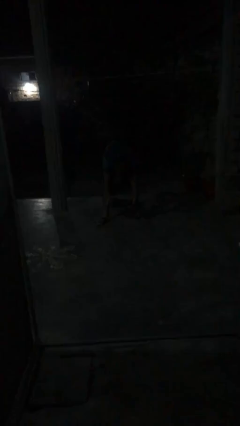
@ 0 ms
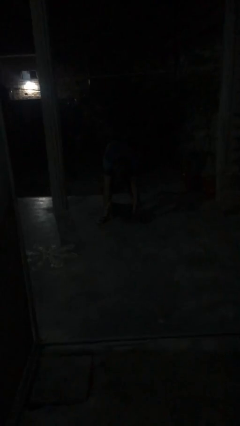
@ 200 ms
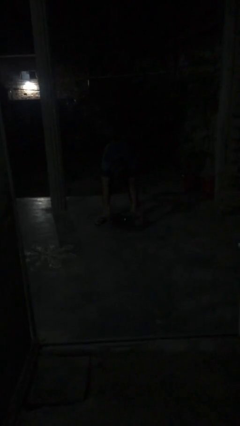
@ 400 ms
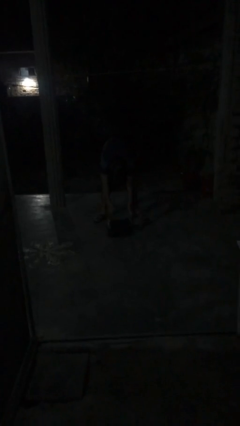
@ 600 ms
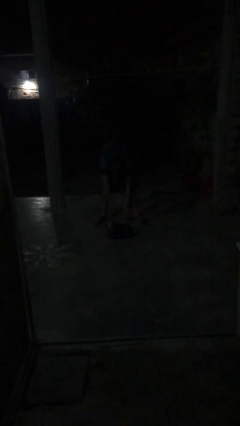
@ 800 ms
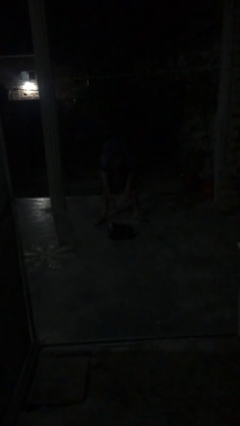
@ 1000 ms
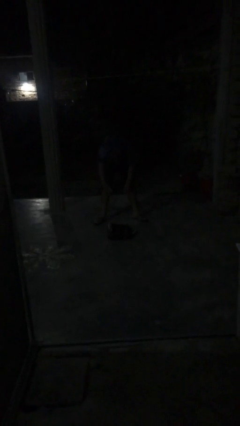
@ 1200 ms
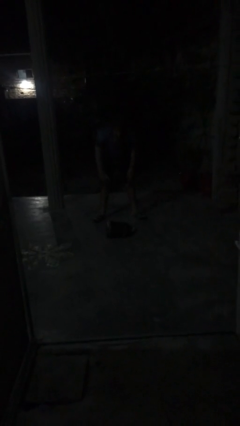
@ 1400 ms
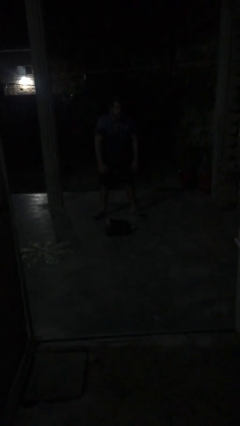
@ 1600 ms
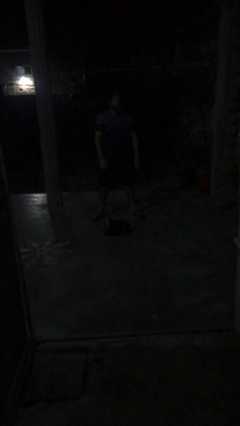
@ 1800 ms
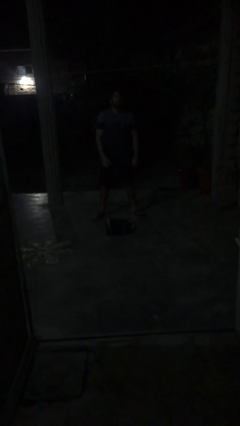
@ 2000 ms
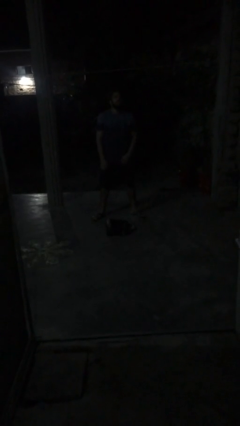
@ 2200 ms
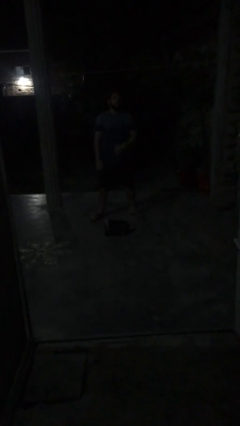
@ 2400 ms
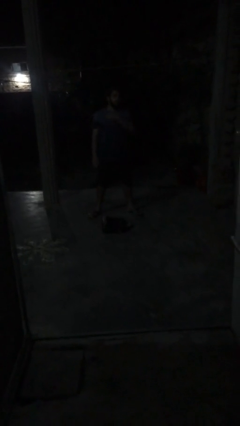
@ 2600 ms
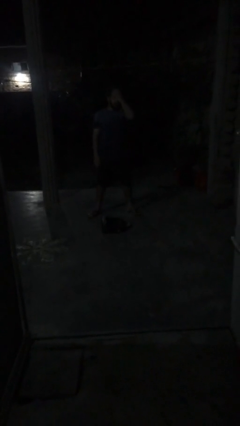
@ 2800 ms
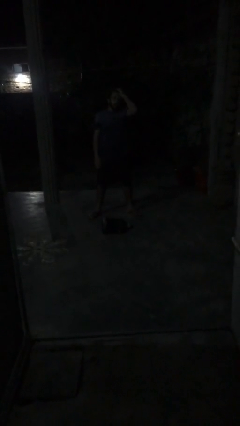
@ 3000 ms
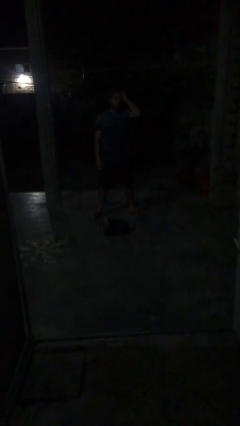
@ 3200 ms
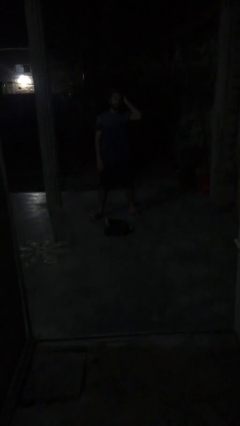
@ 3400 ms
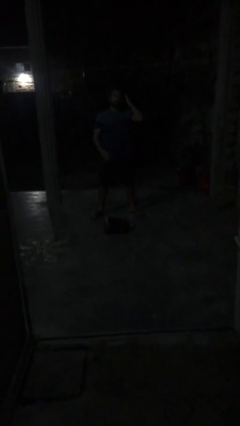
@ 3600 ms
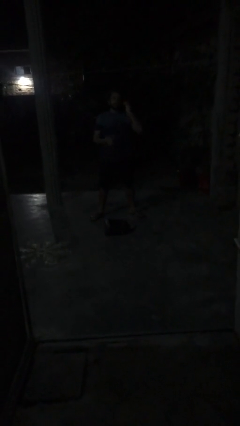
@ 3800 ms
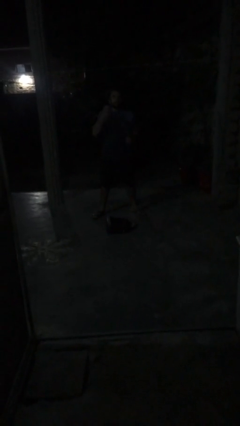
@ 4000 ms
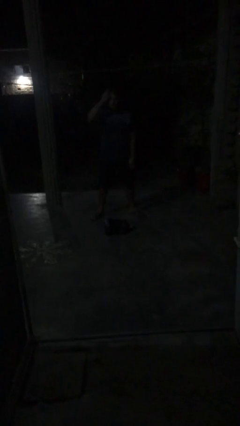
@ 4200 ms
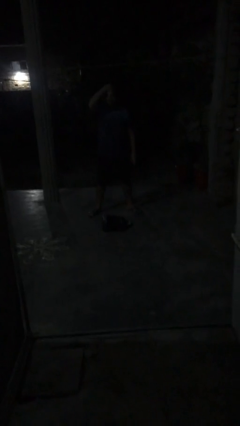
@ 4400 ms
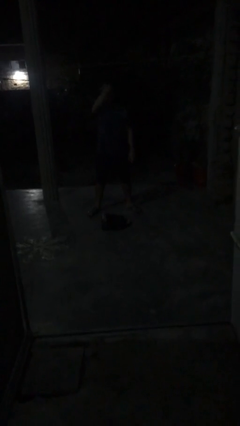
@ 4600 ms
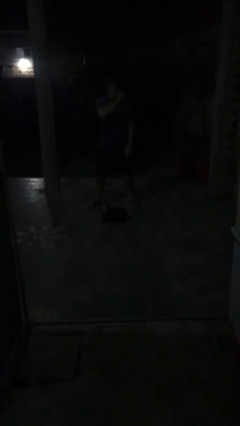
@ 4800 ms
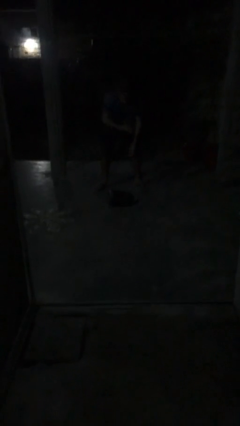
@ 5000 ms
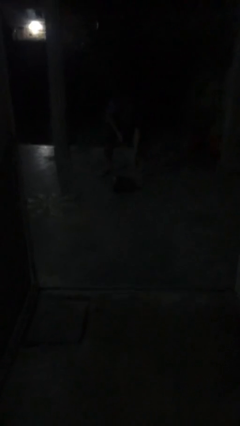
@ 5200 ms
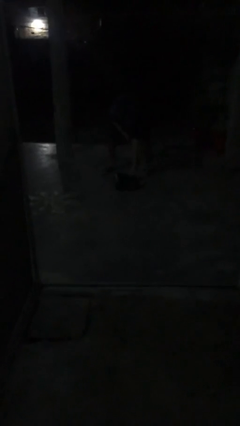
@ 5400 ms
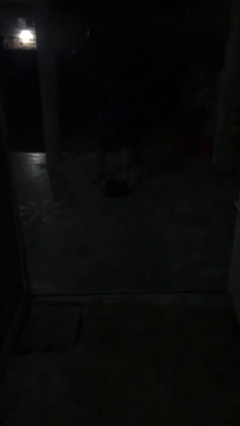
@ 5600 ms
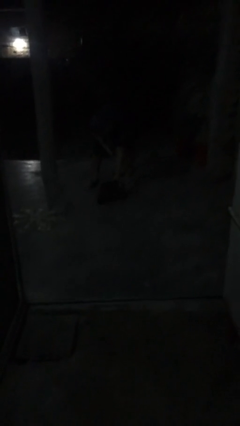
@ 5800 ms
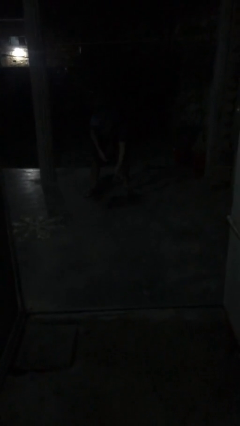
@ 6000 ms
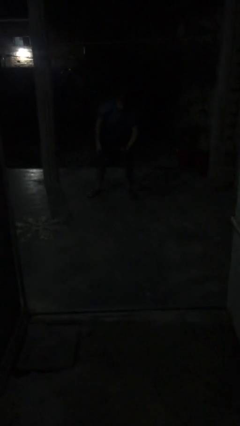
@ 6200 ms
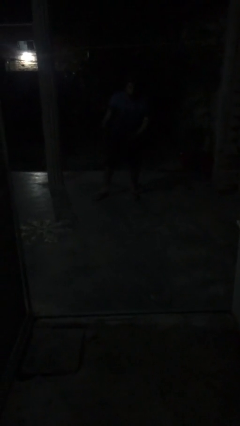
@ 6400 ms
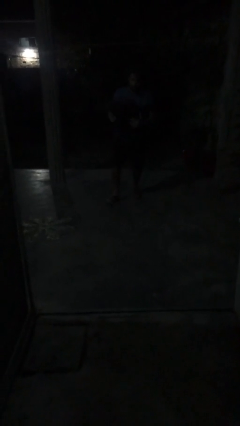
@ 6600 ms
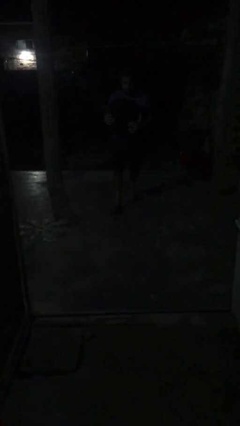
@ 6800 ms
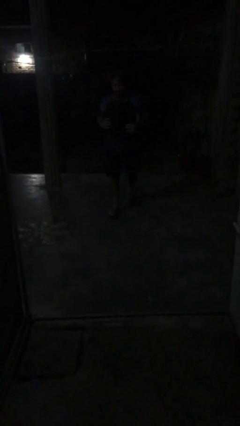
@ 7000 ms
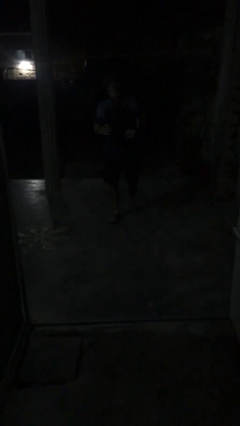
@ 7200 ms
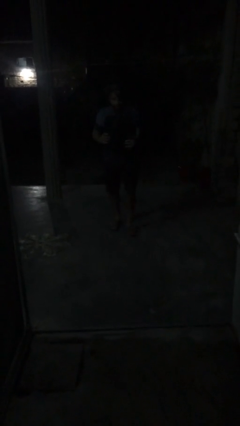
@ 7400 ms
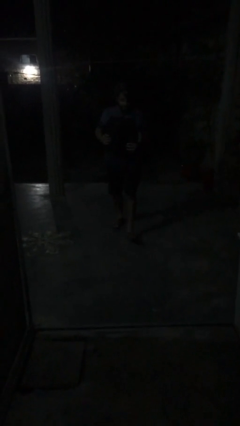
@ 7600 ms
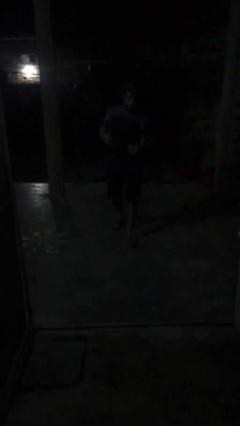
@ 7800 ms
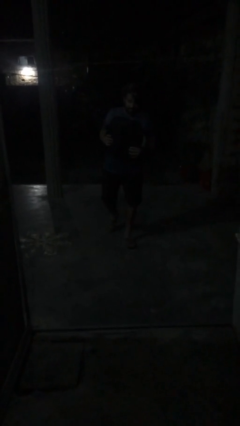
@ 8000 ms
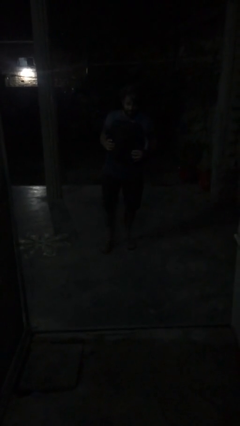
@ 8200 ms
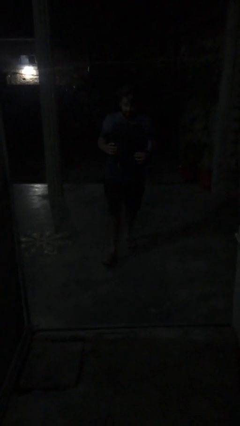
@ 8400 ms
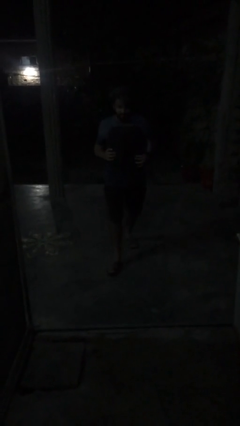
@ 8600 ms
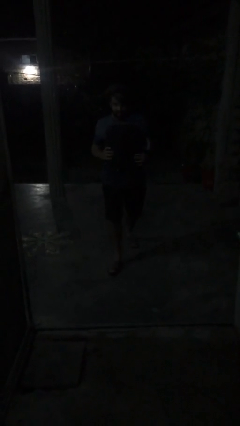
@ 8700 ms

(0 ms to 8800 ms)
person carries heavy object

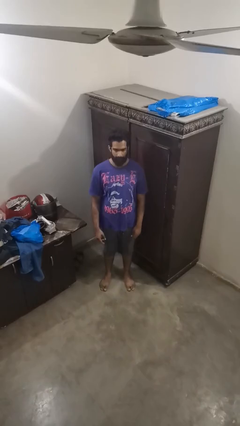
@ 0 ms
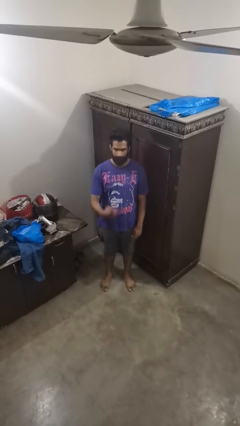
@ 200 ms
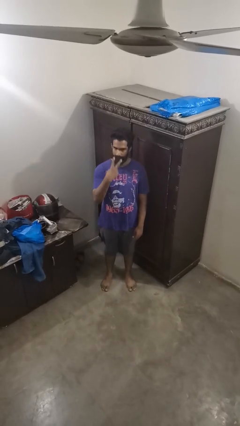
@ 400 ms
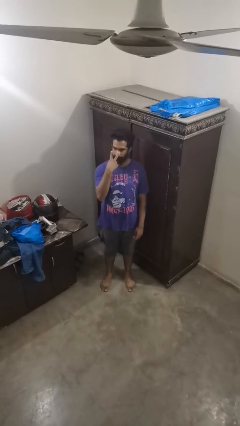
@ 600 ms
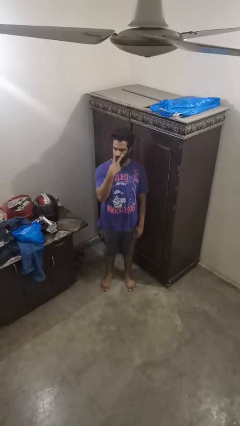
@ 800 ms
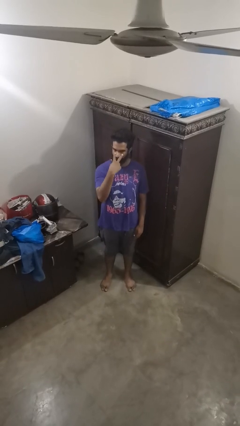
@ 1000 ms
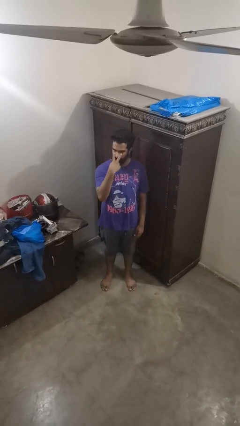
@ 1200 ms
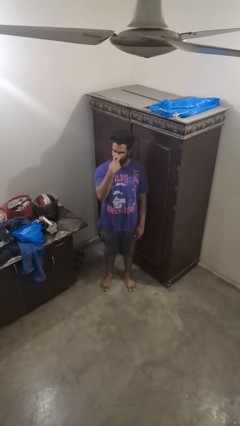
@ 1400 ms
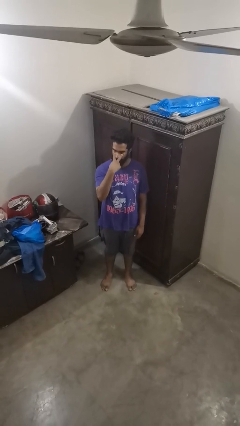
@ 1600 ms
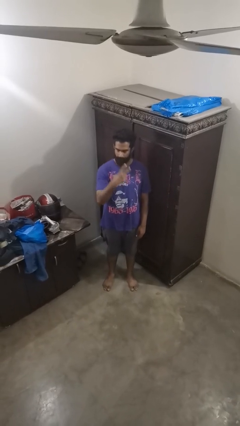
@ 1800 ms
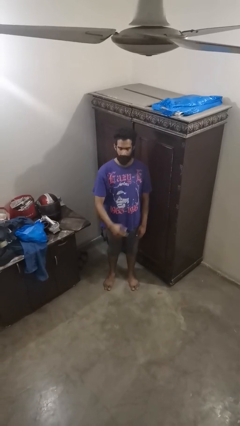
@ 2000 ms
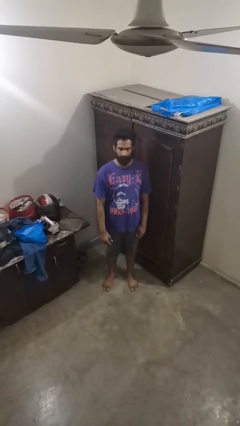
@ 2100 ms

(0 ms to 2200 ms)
person gestures watch closely

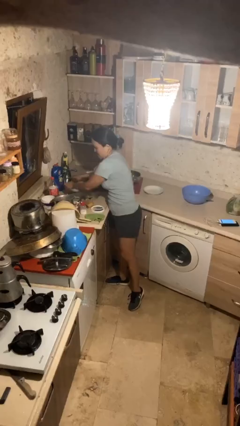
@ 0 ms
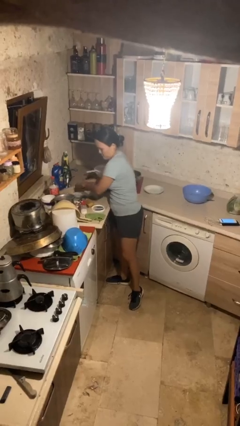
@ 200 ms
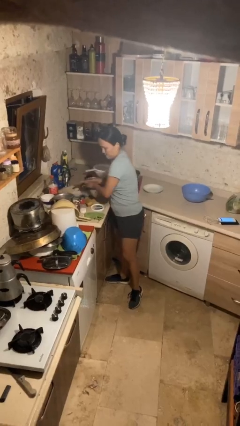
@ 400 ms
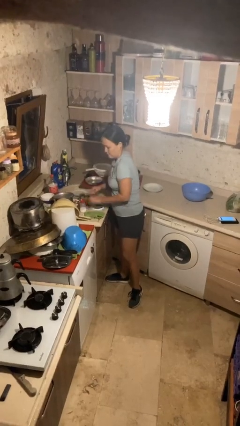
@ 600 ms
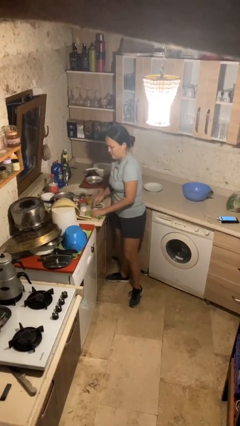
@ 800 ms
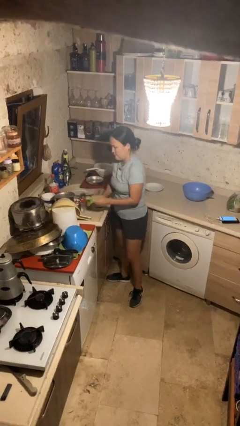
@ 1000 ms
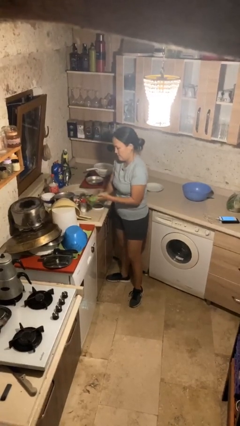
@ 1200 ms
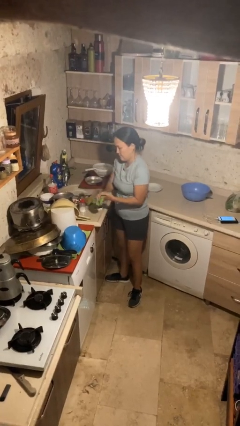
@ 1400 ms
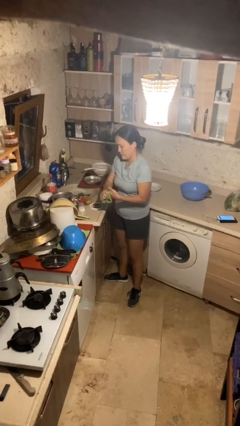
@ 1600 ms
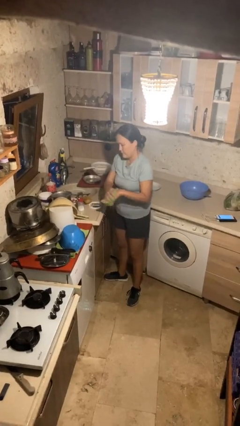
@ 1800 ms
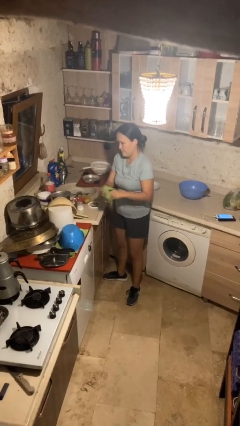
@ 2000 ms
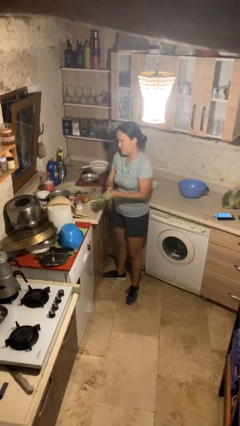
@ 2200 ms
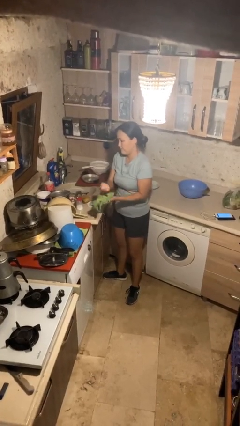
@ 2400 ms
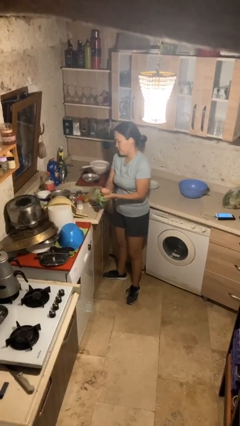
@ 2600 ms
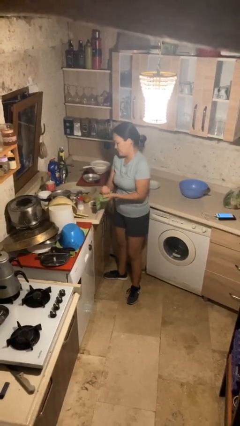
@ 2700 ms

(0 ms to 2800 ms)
person dries hands with towel

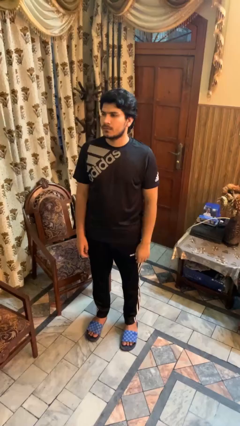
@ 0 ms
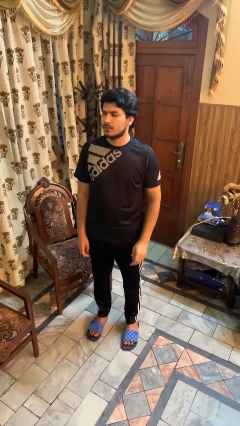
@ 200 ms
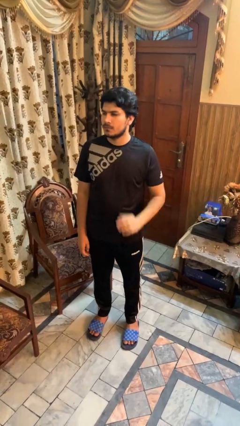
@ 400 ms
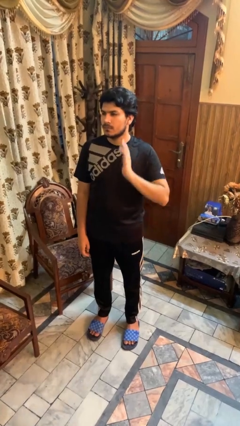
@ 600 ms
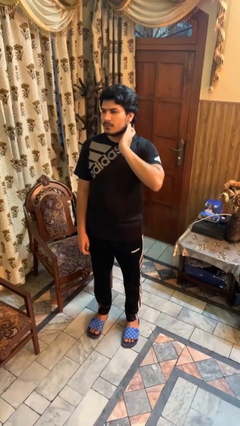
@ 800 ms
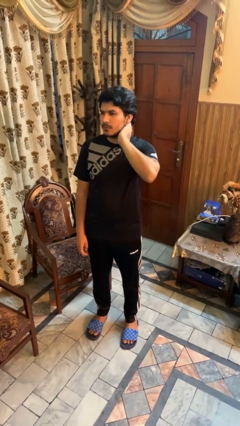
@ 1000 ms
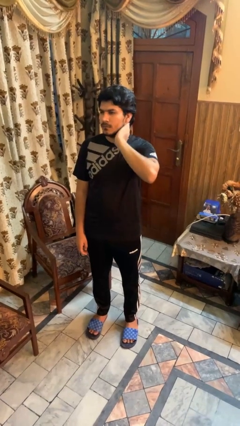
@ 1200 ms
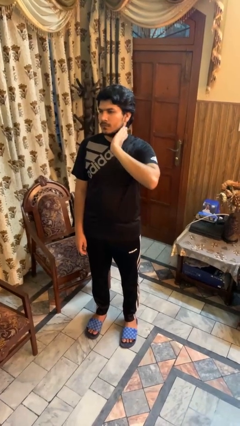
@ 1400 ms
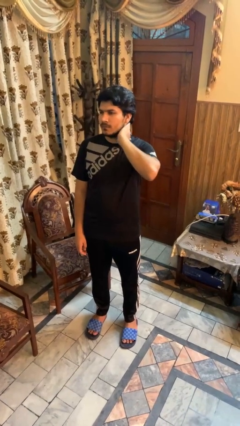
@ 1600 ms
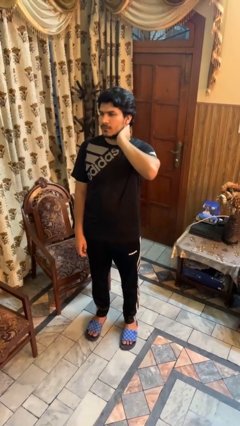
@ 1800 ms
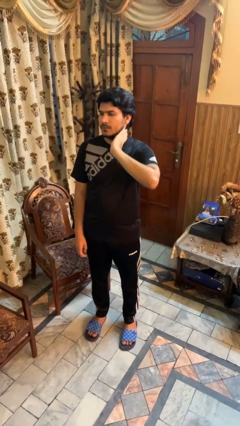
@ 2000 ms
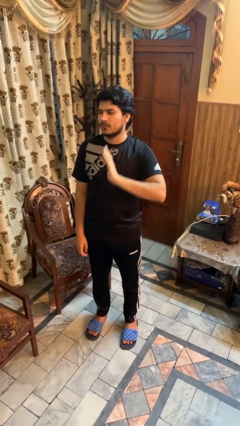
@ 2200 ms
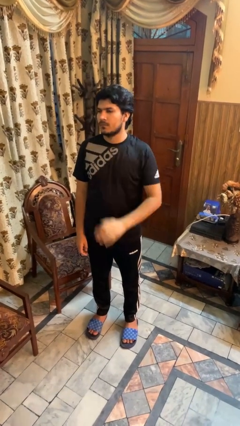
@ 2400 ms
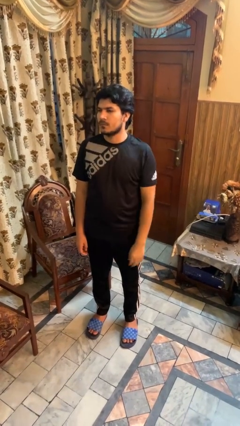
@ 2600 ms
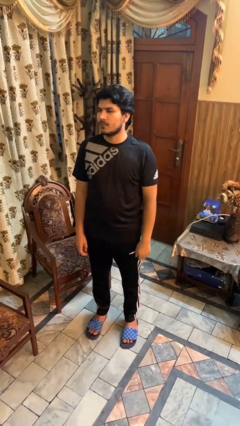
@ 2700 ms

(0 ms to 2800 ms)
person rubs neck

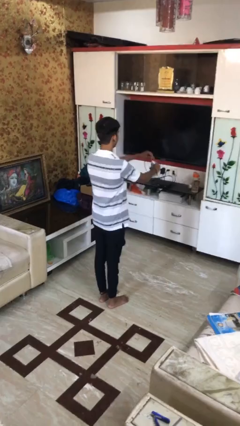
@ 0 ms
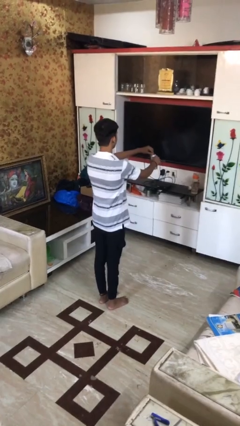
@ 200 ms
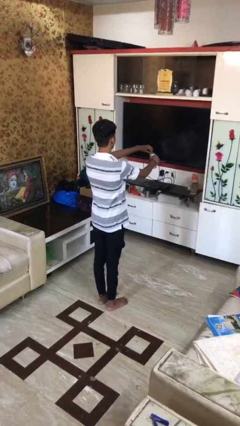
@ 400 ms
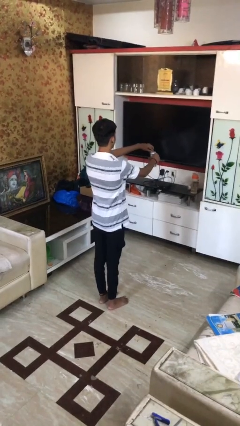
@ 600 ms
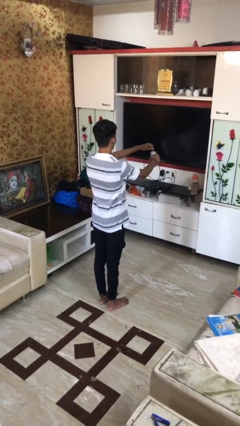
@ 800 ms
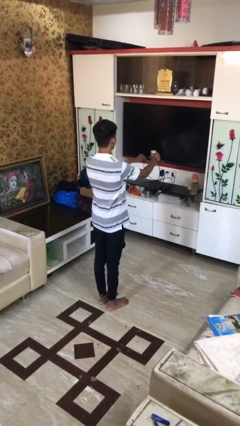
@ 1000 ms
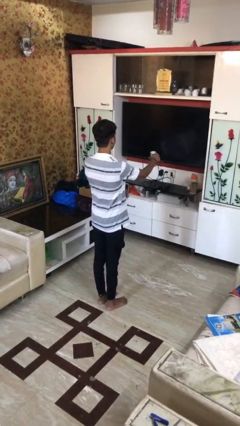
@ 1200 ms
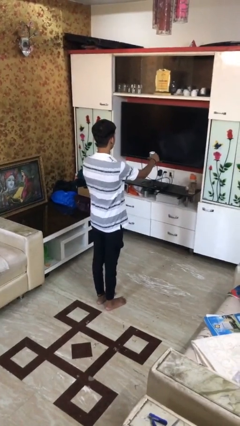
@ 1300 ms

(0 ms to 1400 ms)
person opens beverage can
